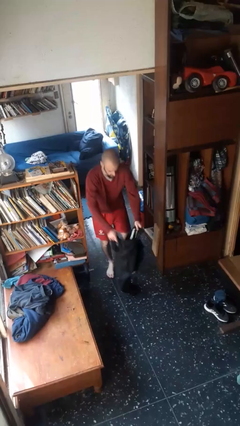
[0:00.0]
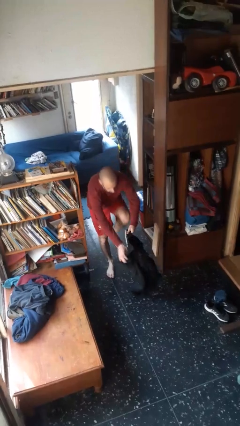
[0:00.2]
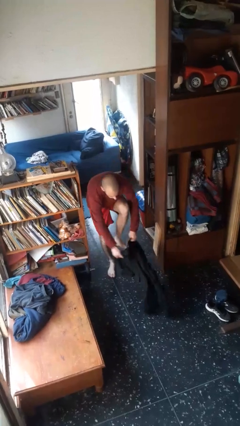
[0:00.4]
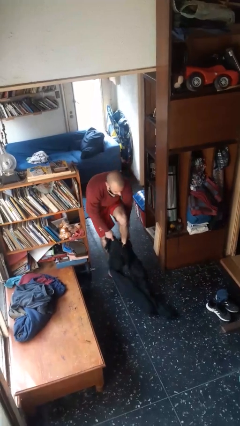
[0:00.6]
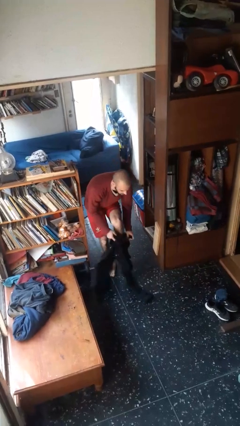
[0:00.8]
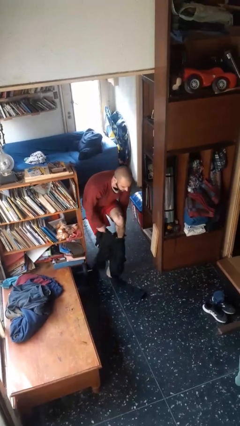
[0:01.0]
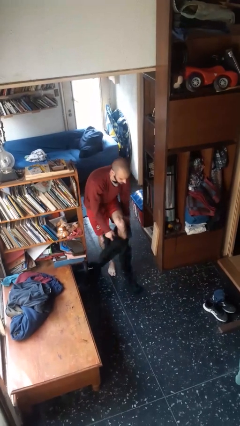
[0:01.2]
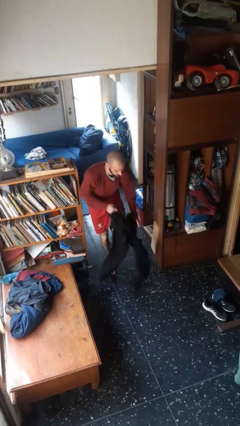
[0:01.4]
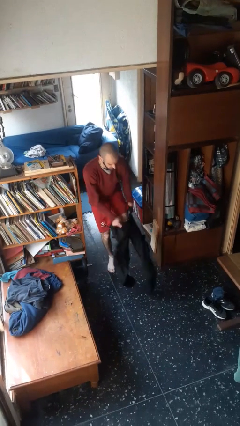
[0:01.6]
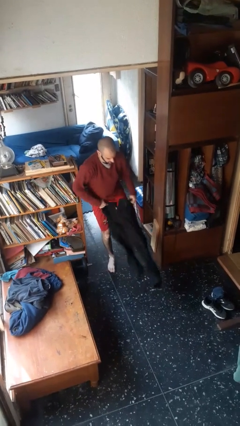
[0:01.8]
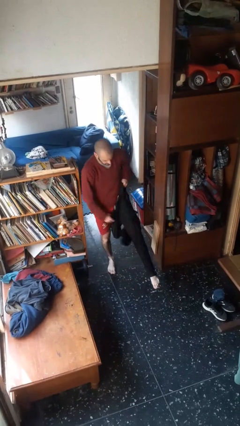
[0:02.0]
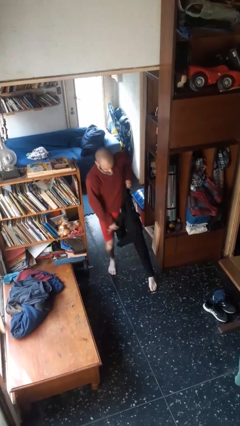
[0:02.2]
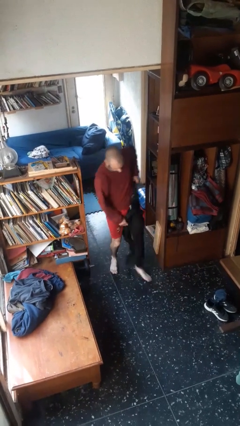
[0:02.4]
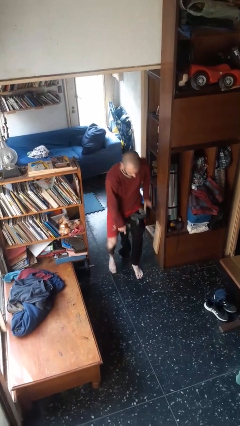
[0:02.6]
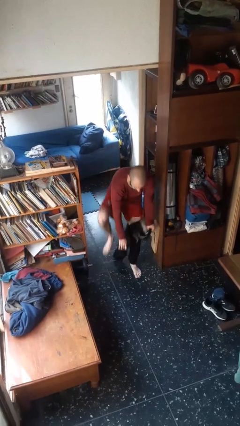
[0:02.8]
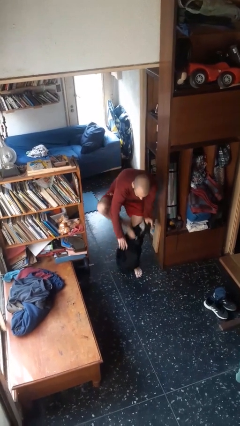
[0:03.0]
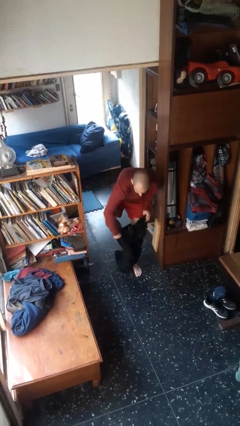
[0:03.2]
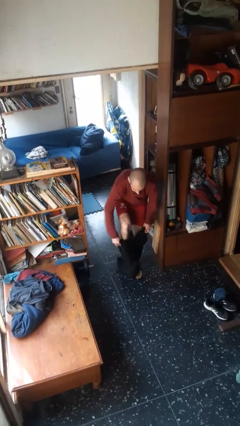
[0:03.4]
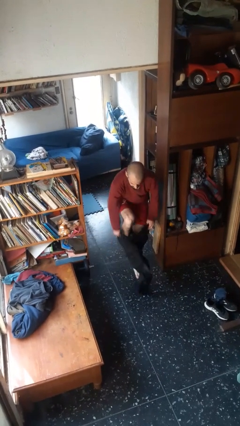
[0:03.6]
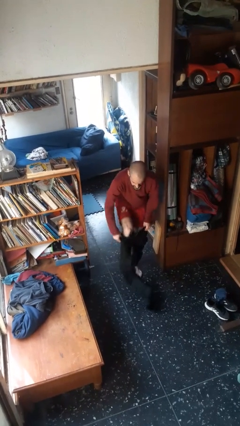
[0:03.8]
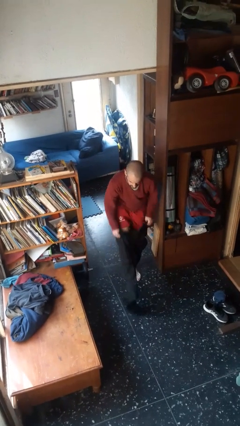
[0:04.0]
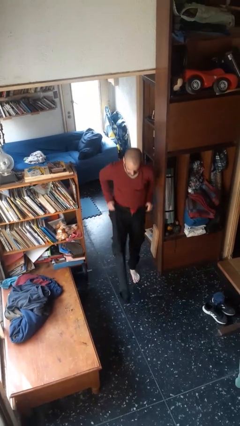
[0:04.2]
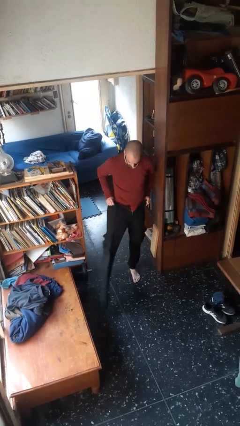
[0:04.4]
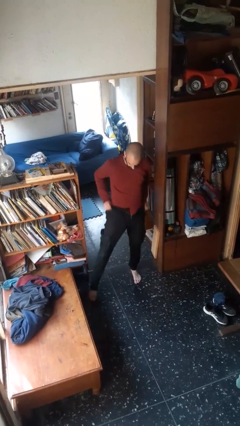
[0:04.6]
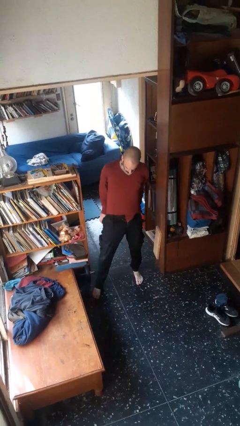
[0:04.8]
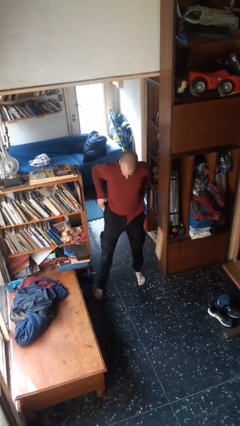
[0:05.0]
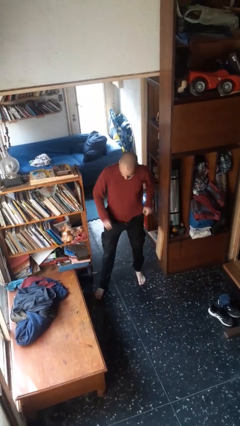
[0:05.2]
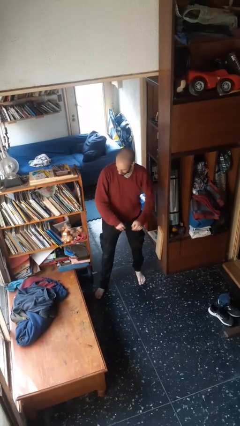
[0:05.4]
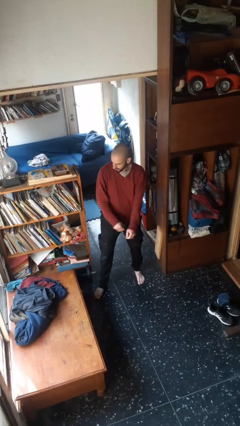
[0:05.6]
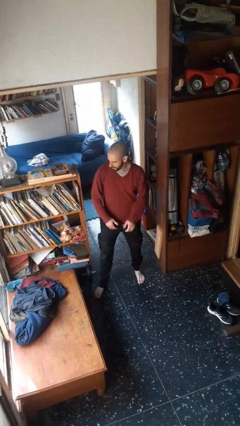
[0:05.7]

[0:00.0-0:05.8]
person puts on pants

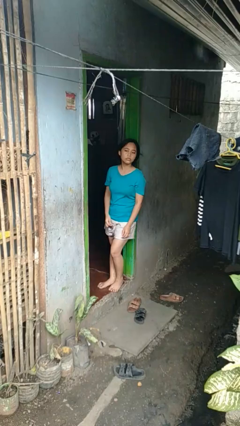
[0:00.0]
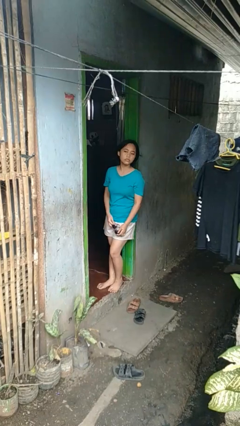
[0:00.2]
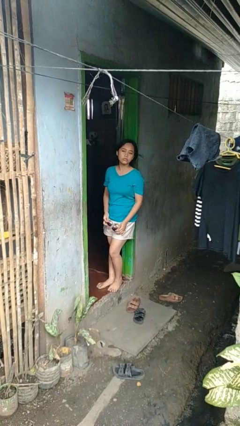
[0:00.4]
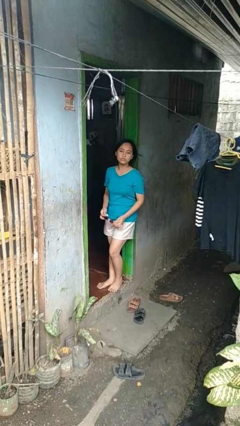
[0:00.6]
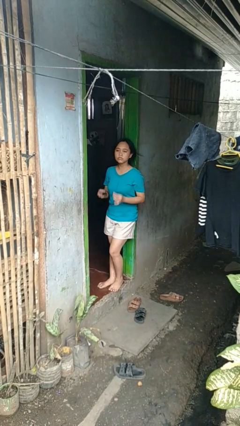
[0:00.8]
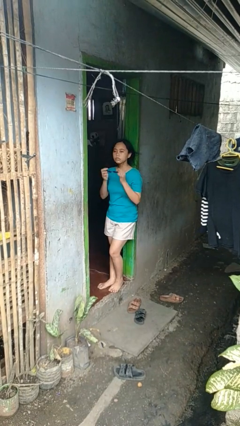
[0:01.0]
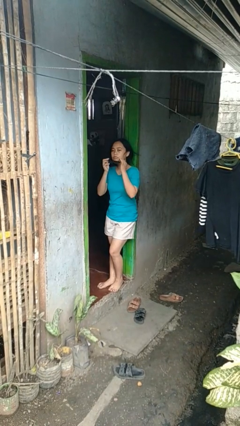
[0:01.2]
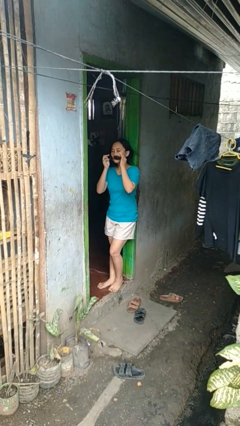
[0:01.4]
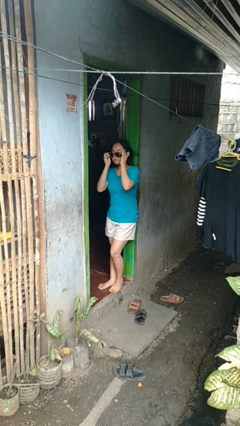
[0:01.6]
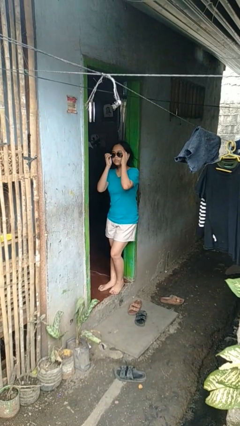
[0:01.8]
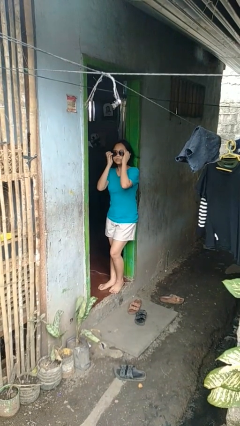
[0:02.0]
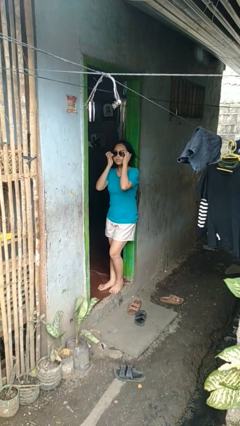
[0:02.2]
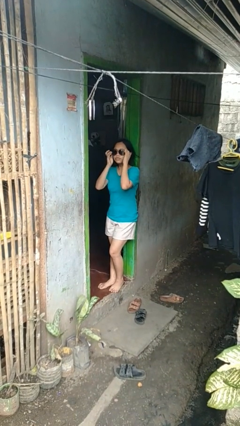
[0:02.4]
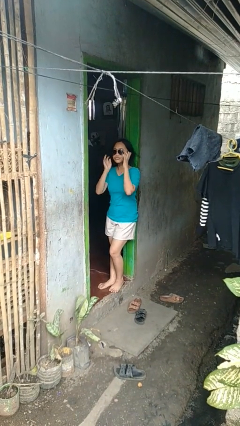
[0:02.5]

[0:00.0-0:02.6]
person puts on sunglasses

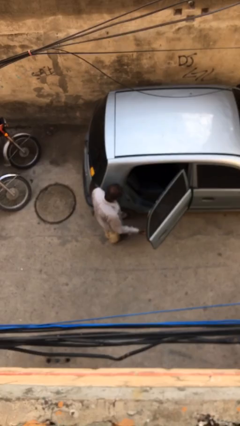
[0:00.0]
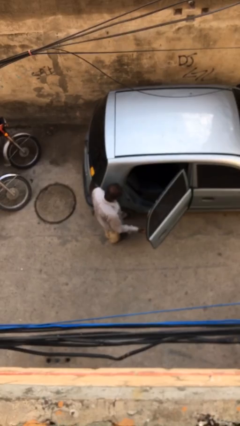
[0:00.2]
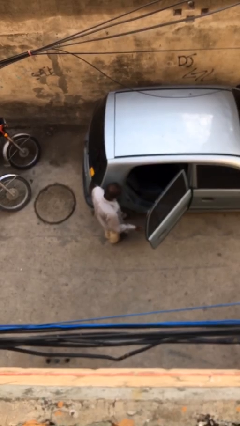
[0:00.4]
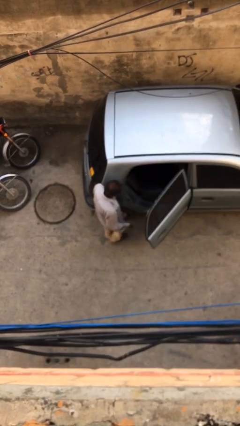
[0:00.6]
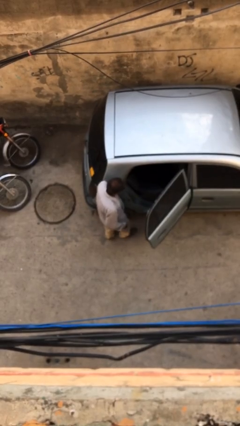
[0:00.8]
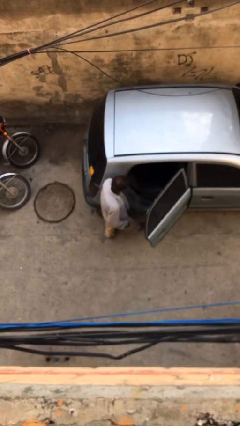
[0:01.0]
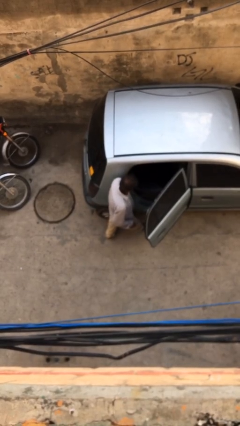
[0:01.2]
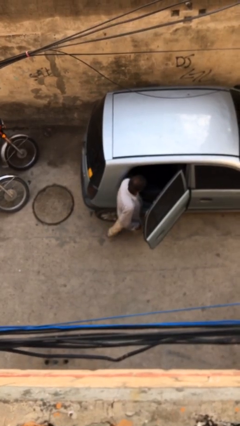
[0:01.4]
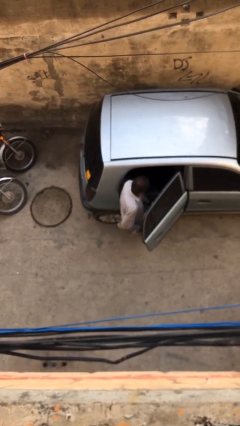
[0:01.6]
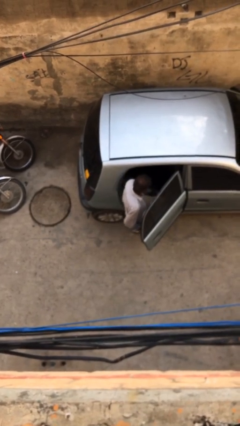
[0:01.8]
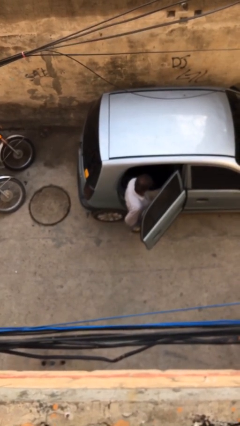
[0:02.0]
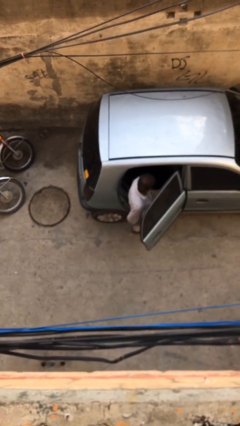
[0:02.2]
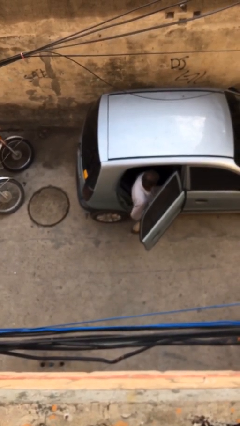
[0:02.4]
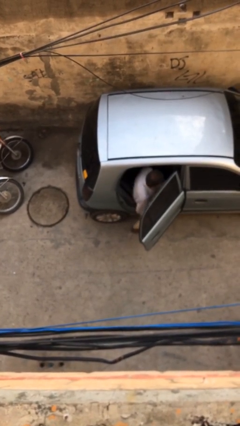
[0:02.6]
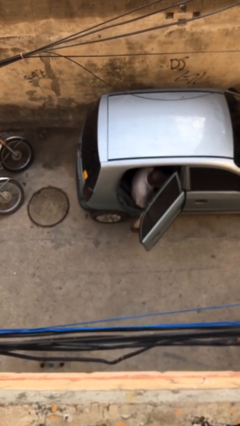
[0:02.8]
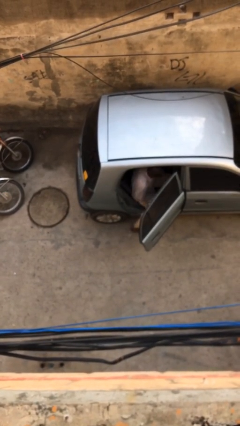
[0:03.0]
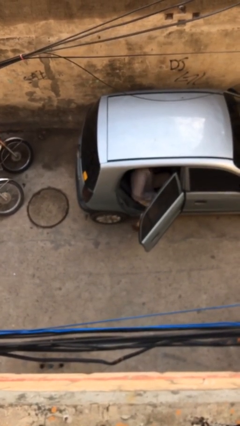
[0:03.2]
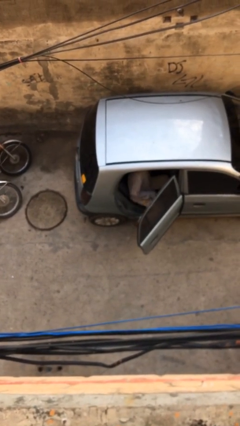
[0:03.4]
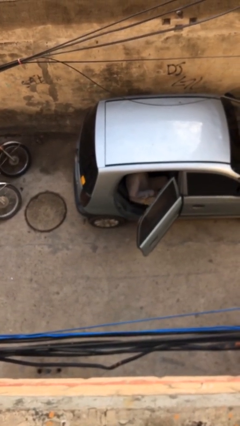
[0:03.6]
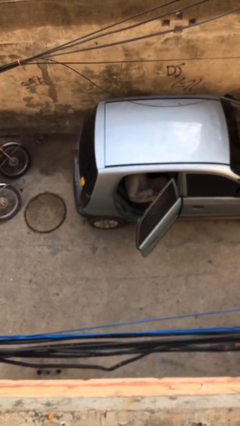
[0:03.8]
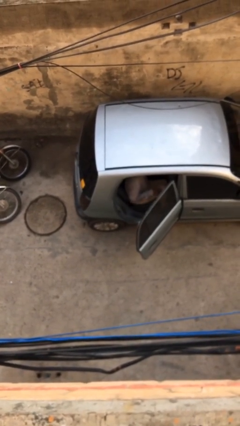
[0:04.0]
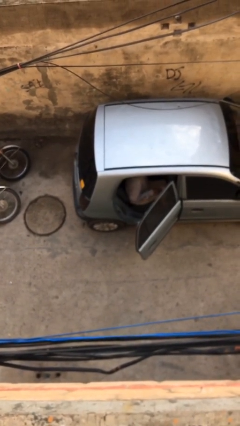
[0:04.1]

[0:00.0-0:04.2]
person enters car

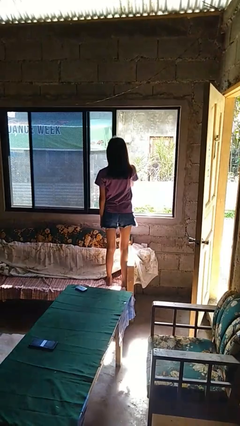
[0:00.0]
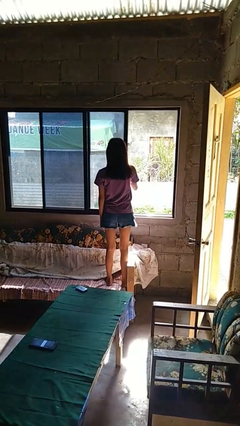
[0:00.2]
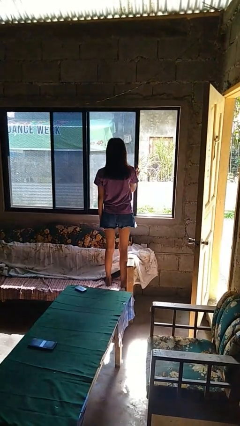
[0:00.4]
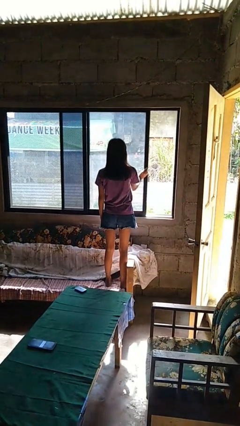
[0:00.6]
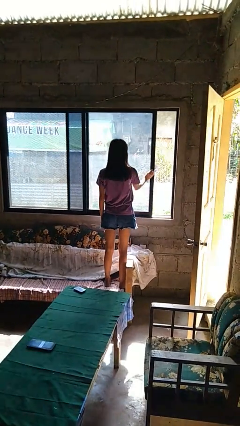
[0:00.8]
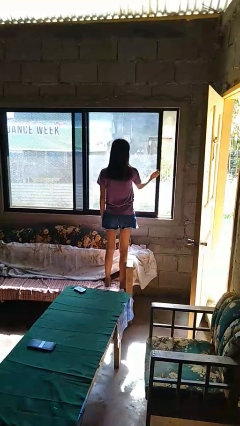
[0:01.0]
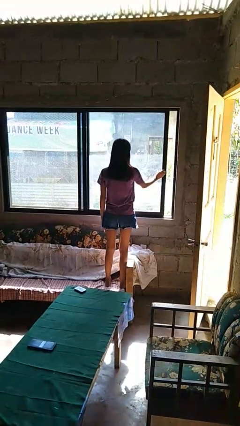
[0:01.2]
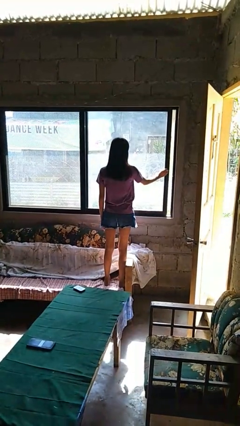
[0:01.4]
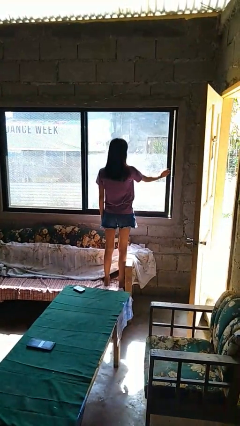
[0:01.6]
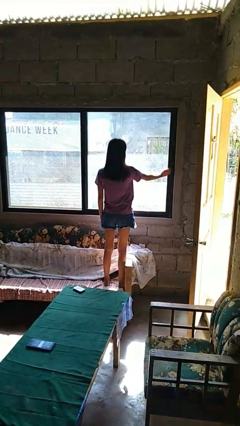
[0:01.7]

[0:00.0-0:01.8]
person closes home window

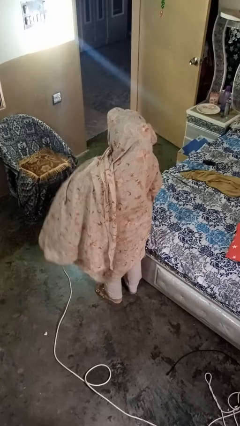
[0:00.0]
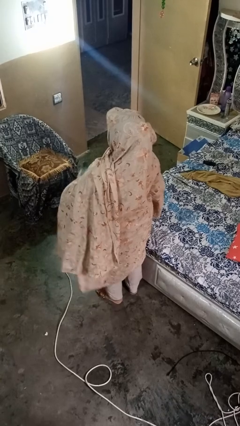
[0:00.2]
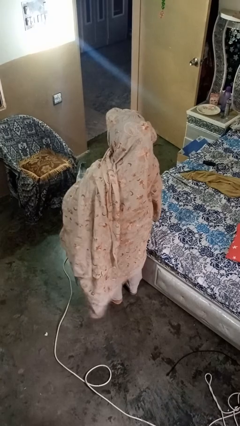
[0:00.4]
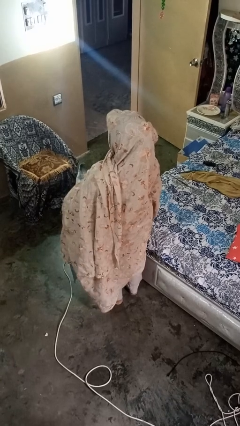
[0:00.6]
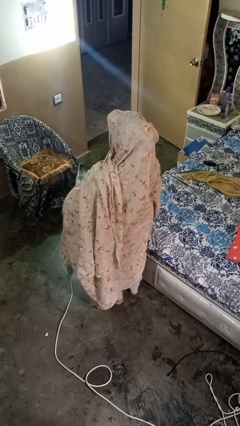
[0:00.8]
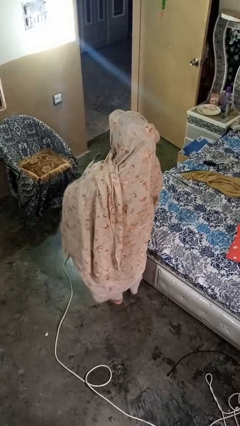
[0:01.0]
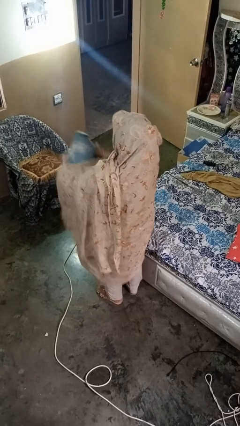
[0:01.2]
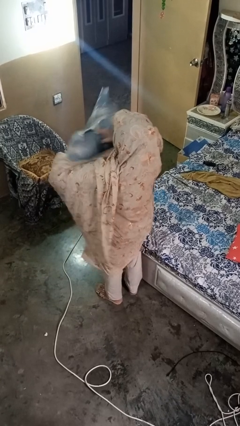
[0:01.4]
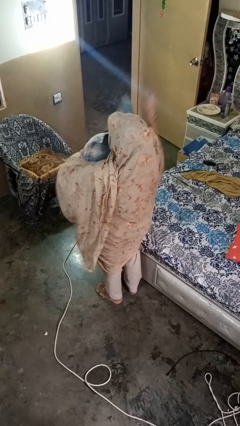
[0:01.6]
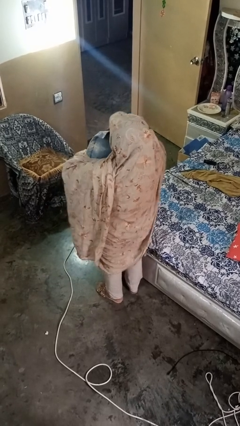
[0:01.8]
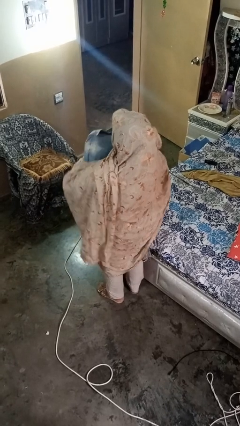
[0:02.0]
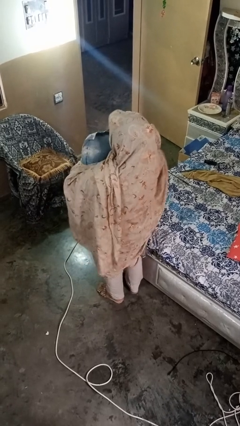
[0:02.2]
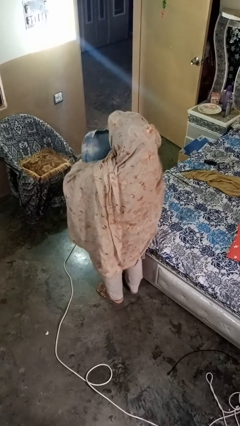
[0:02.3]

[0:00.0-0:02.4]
person squeezes object

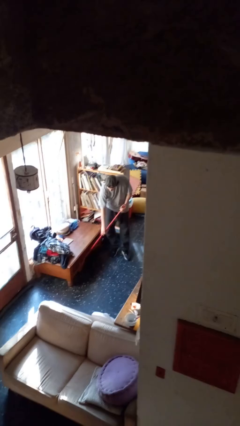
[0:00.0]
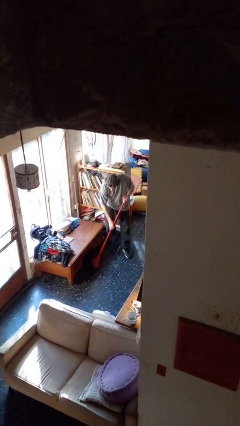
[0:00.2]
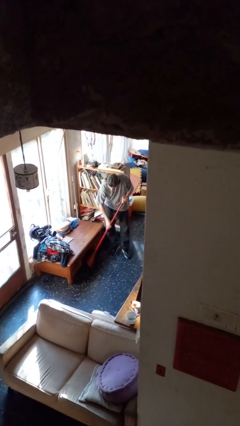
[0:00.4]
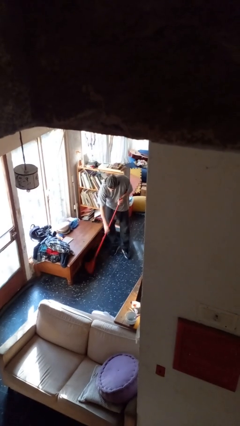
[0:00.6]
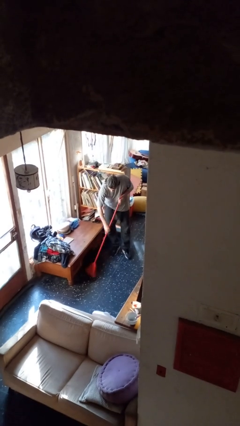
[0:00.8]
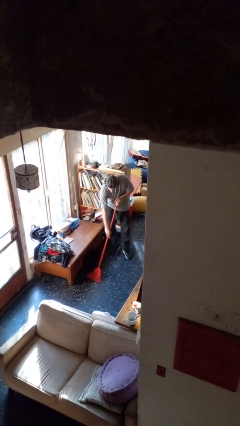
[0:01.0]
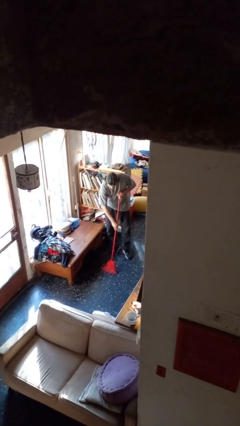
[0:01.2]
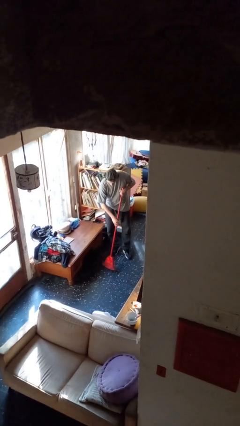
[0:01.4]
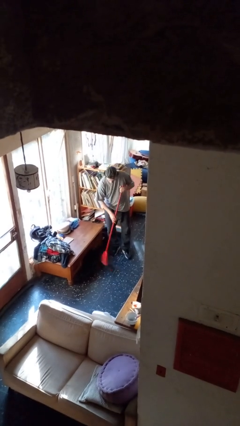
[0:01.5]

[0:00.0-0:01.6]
person sweeps floor
